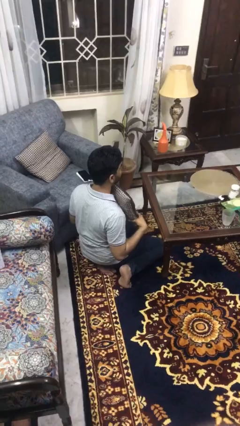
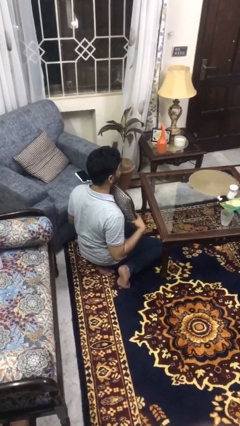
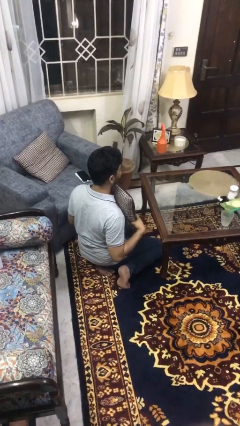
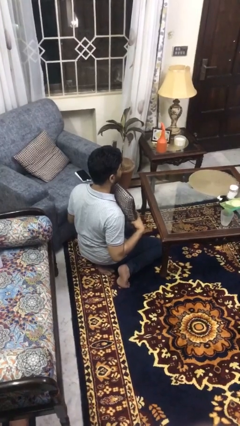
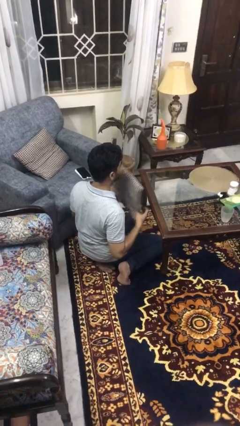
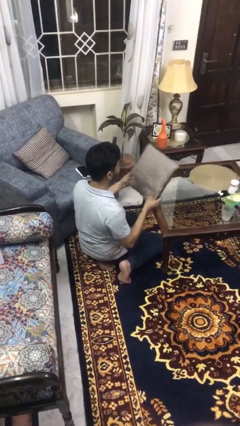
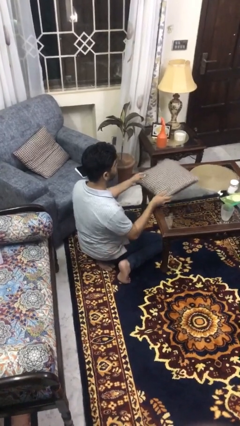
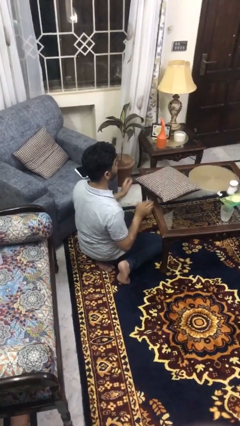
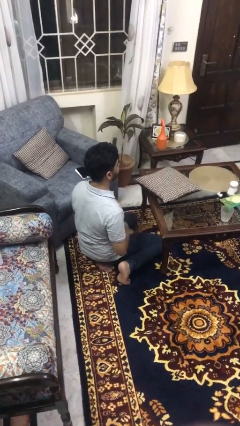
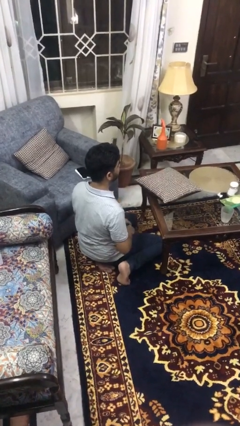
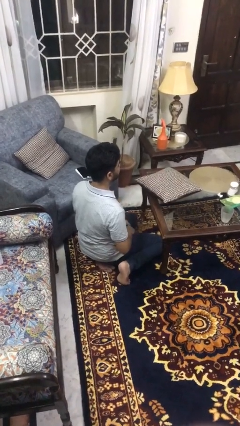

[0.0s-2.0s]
person throws object on table

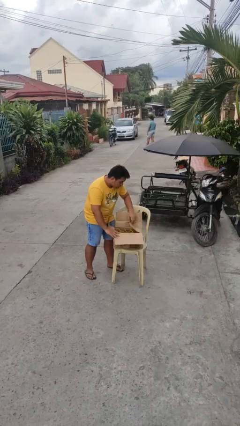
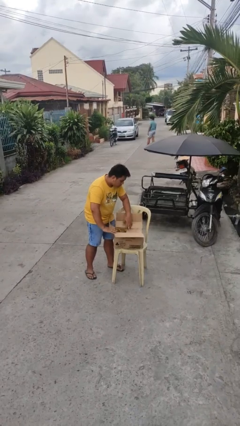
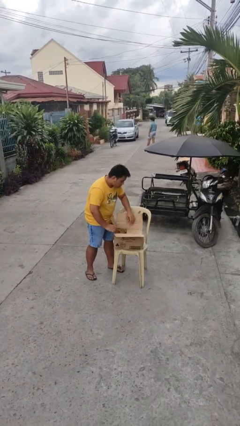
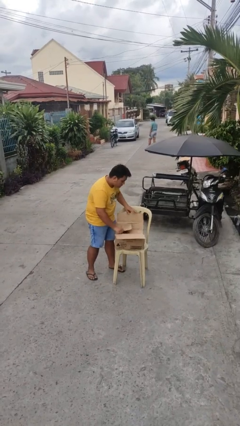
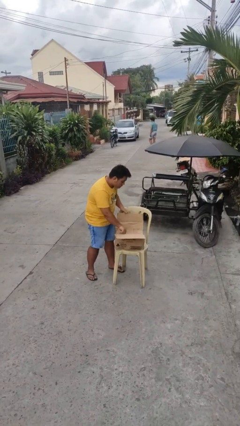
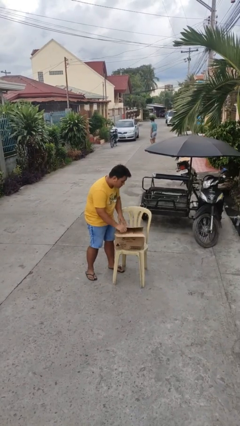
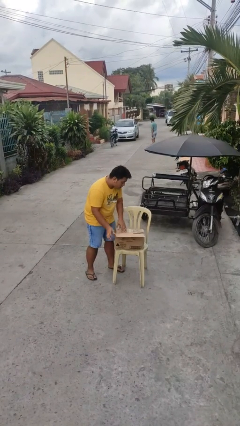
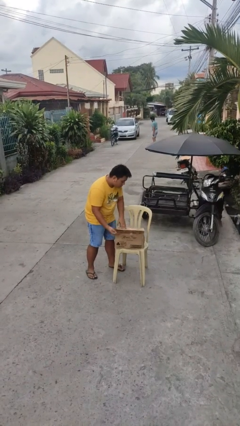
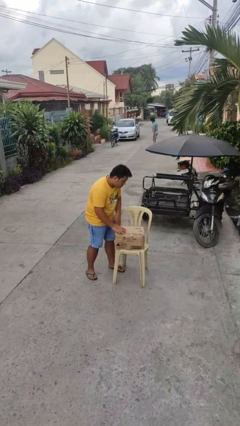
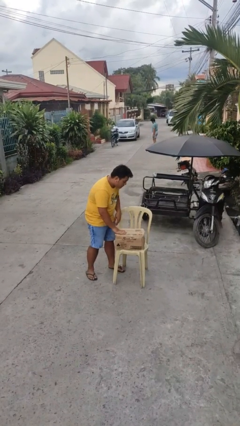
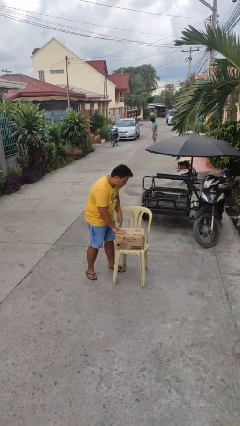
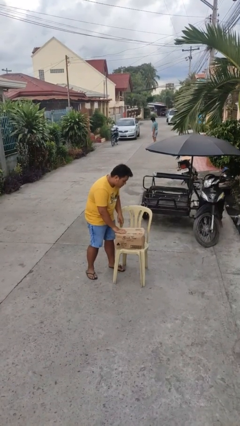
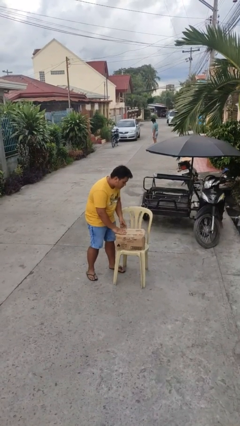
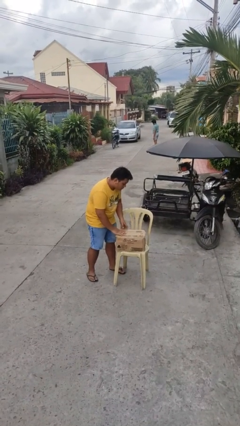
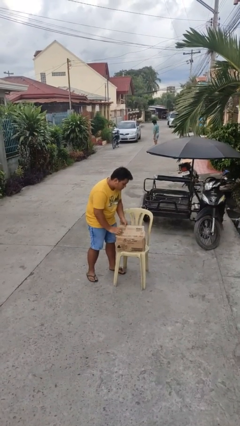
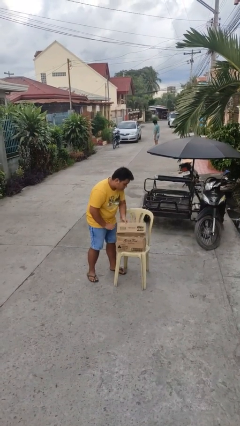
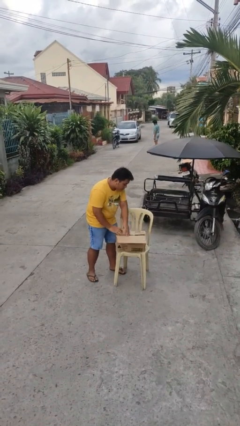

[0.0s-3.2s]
person closes box

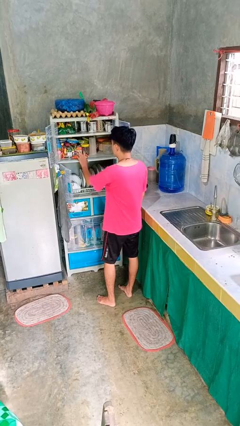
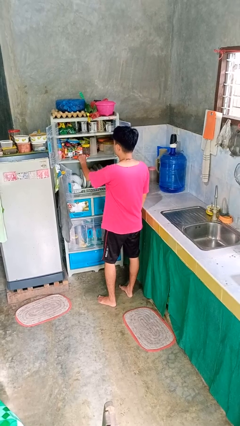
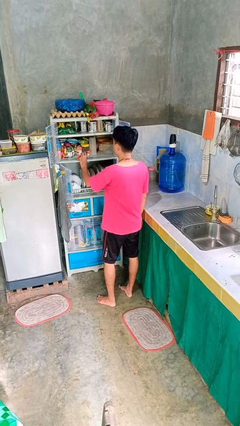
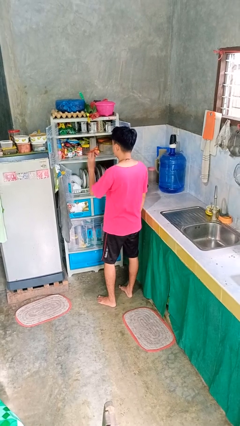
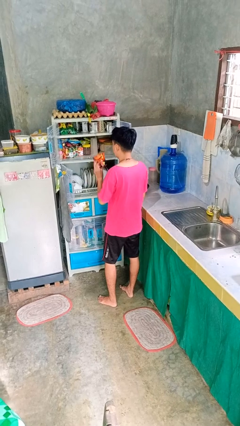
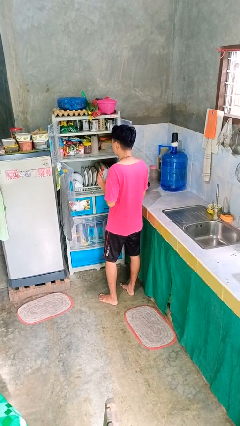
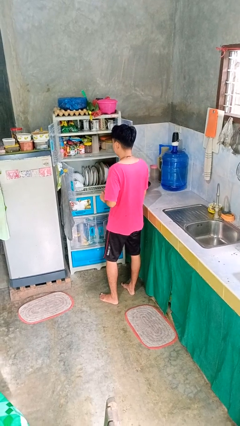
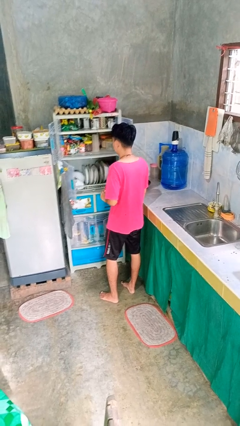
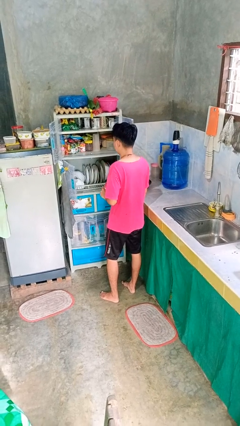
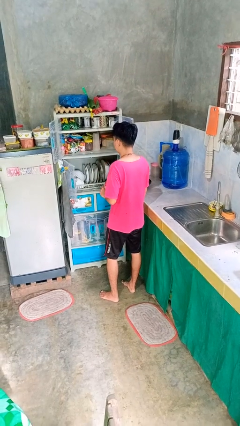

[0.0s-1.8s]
person takes object from cabinet

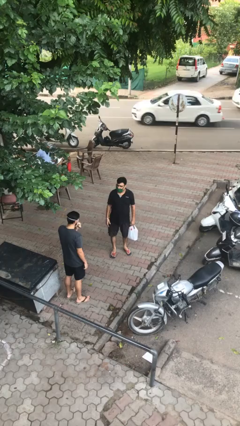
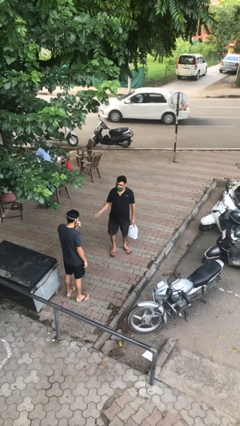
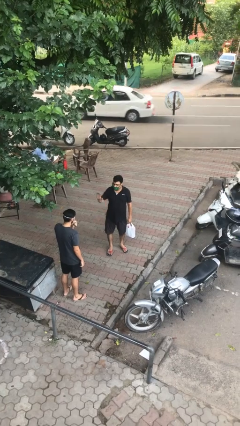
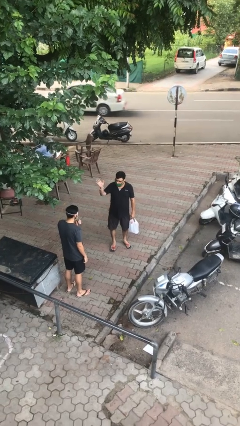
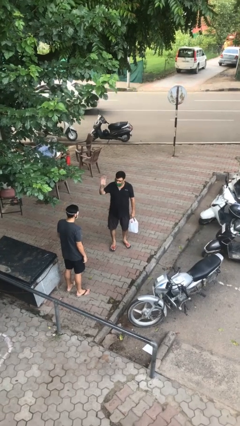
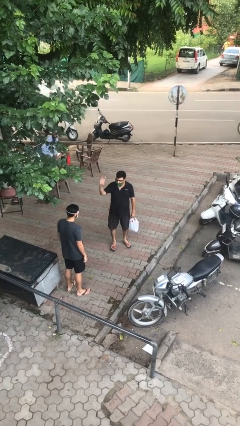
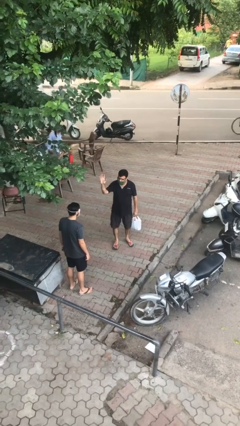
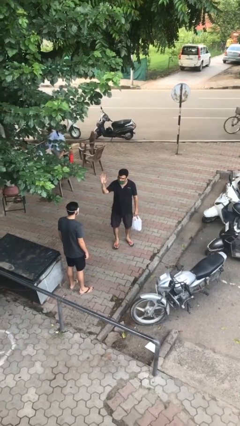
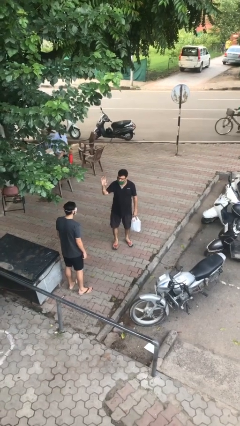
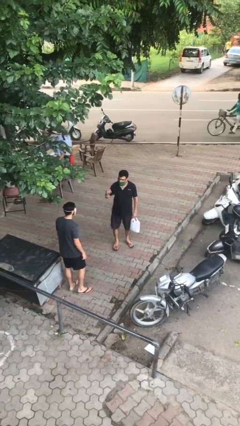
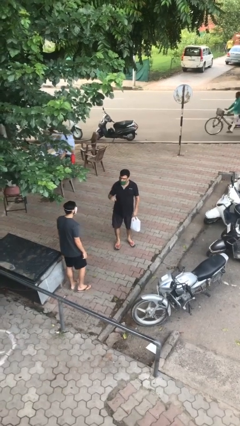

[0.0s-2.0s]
person waves at person

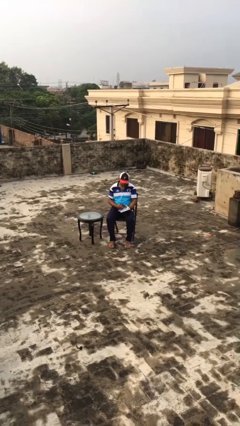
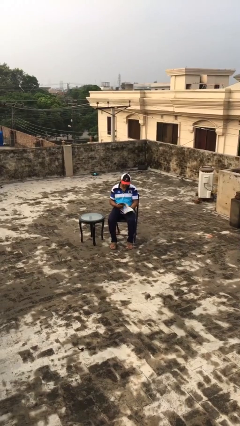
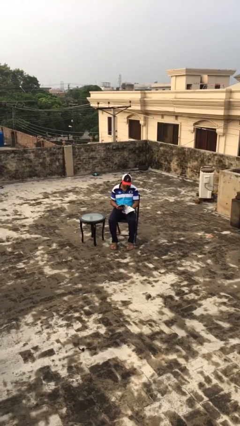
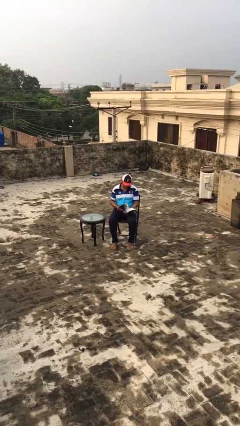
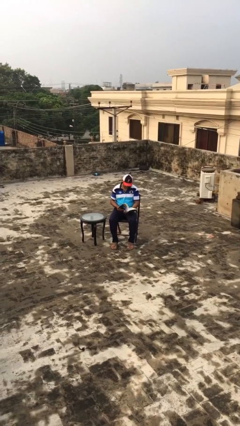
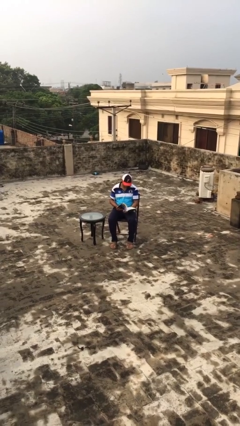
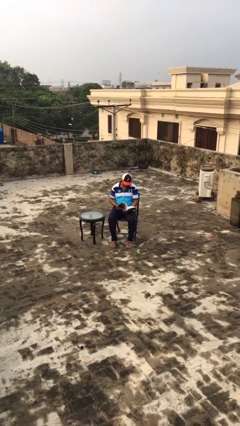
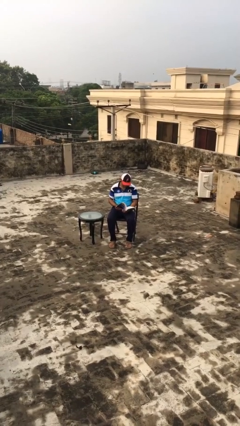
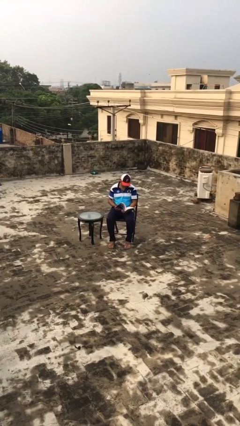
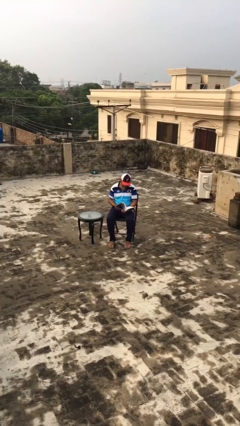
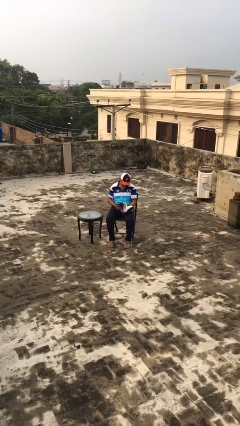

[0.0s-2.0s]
person reads document

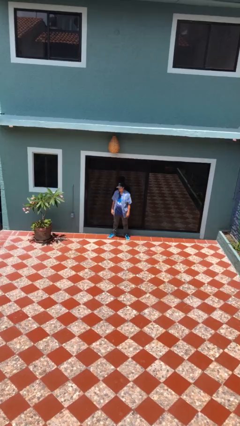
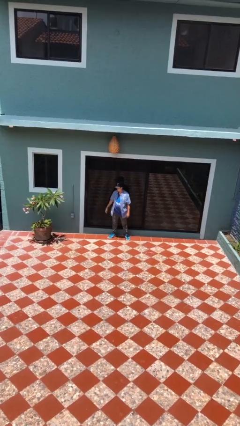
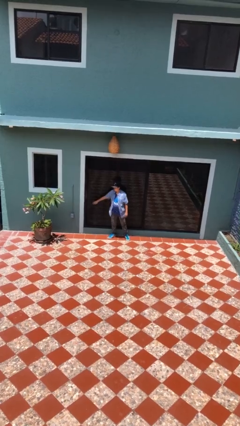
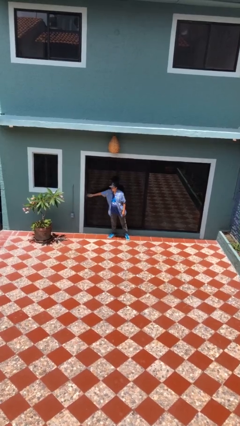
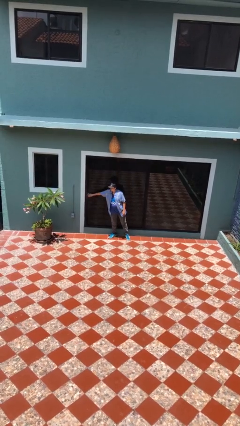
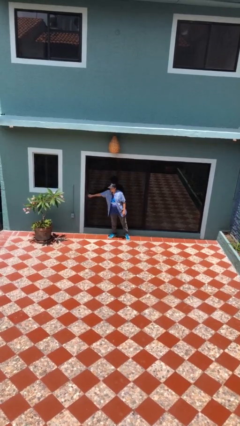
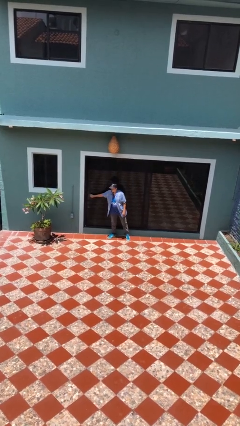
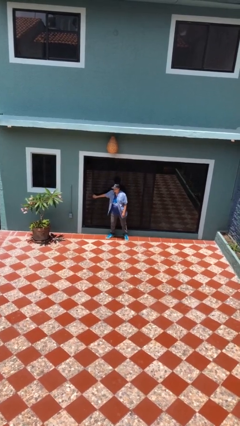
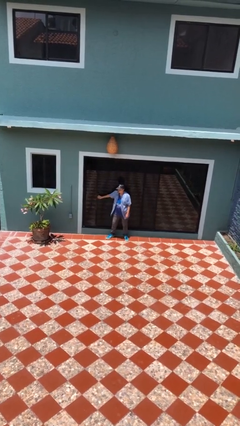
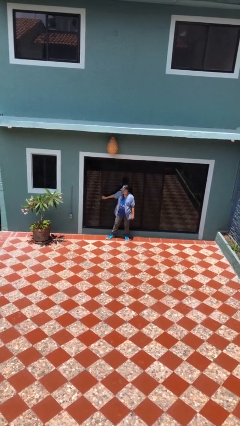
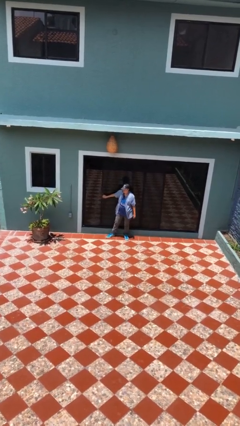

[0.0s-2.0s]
person opens sliding door

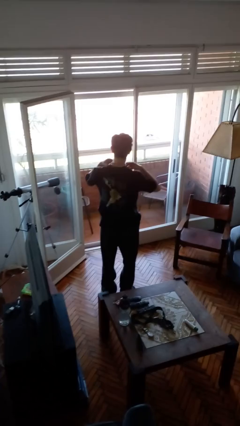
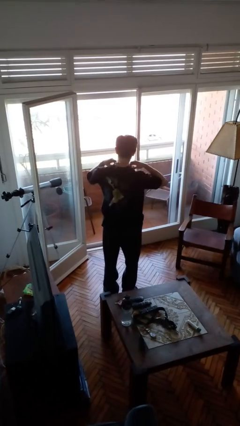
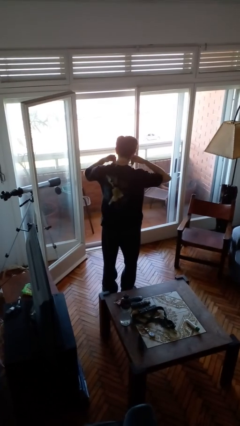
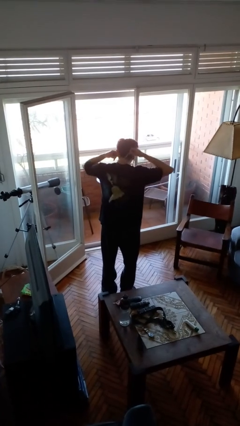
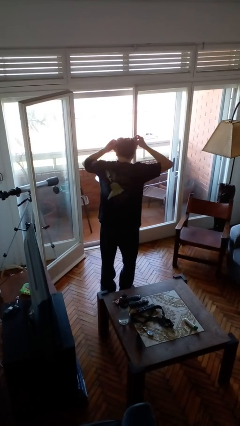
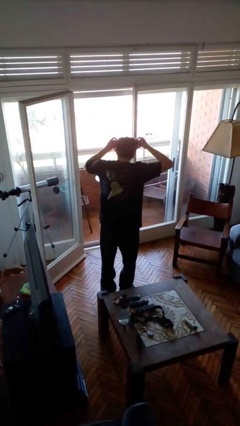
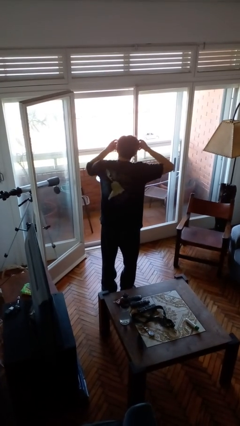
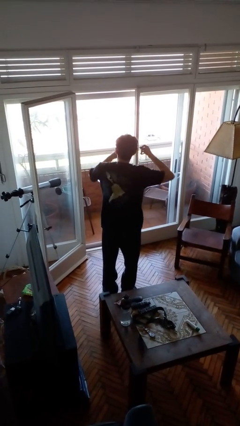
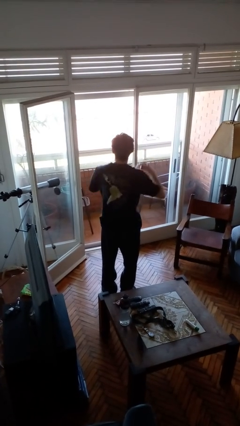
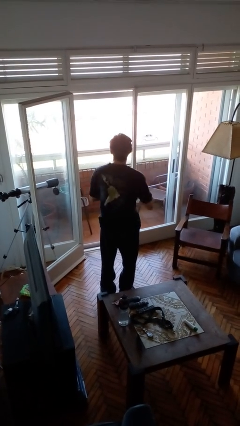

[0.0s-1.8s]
person takes off necklace

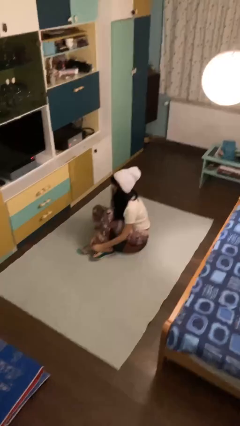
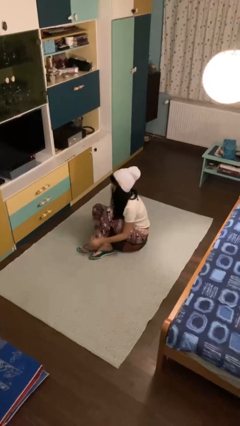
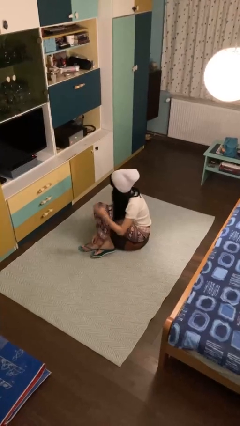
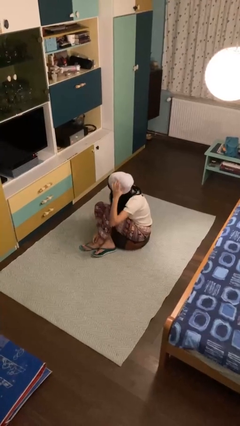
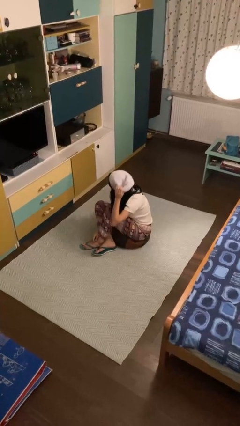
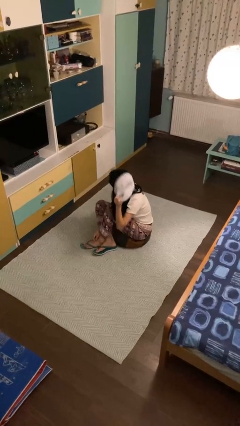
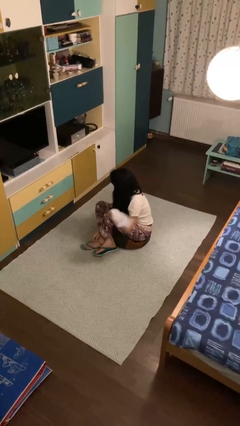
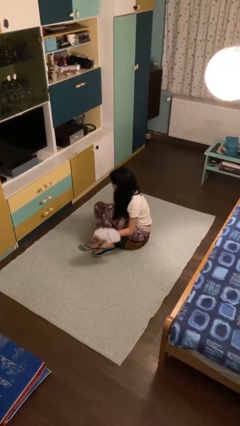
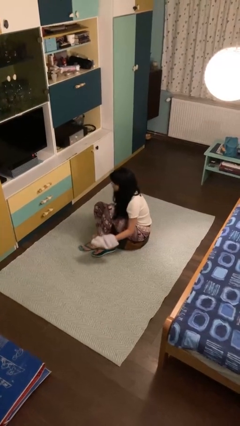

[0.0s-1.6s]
person takes off hat

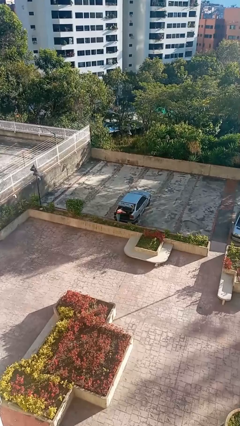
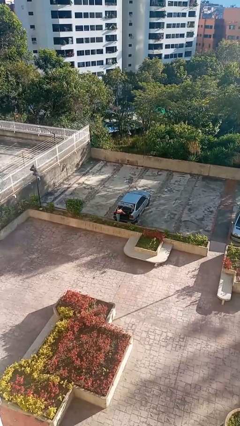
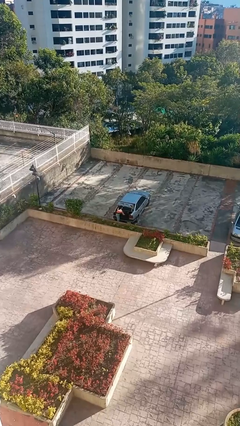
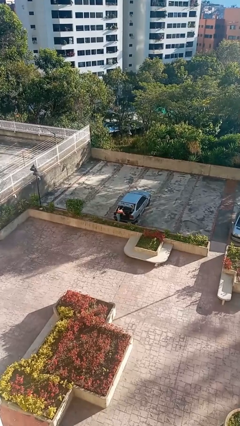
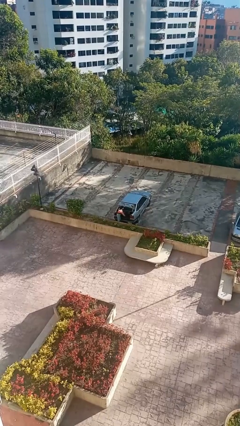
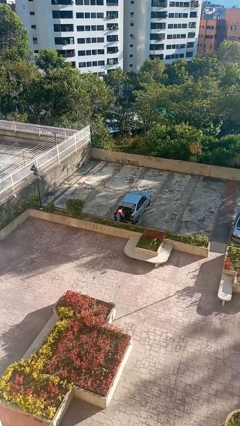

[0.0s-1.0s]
person loads car
